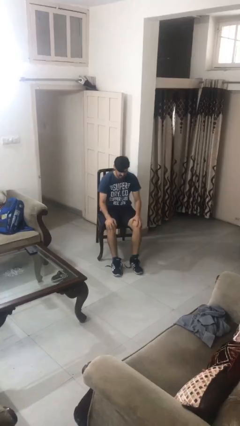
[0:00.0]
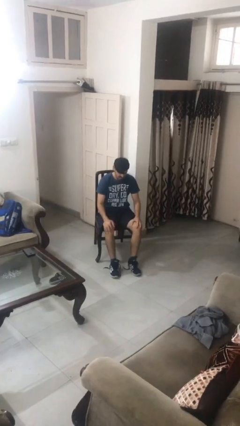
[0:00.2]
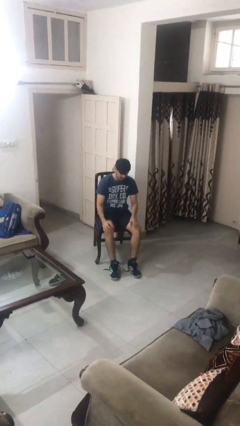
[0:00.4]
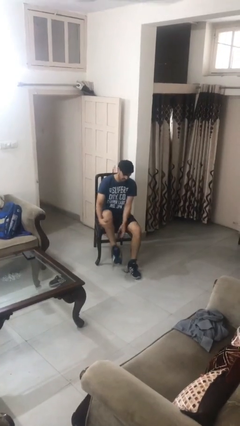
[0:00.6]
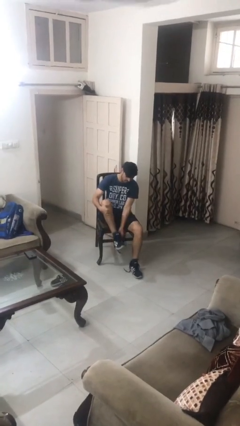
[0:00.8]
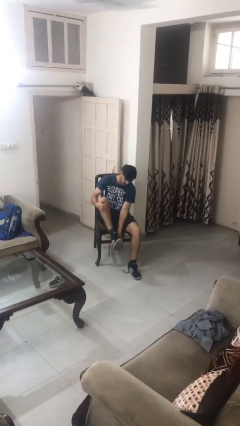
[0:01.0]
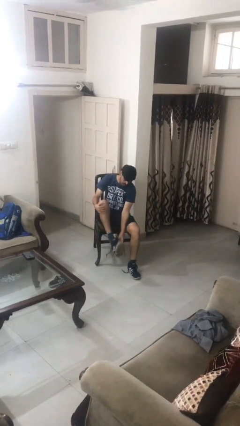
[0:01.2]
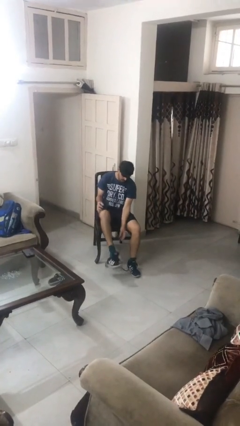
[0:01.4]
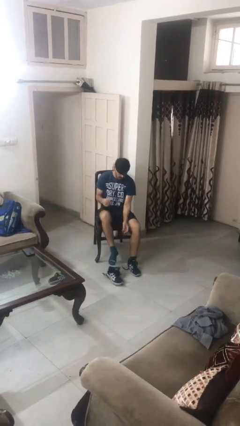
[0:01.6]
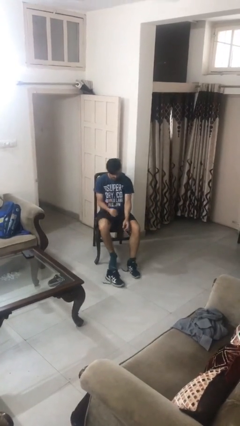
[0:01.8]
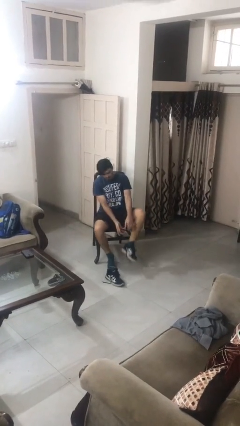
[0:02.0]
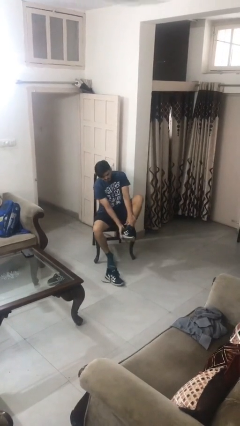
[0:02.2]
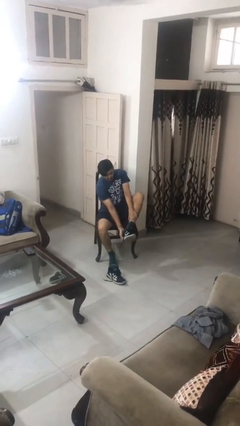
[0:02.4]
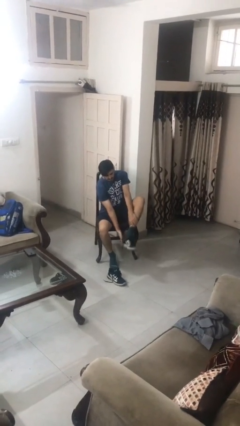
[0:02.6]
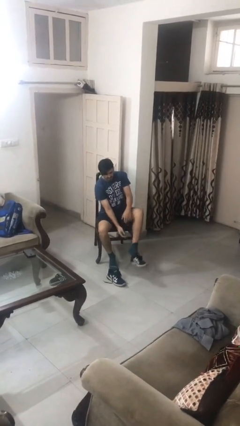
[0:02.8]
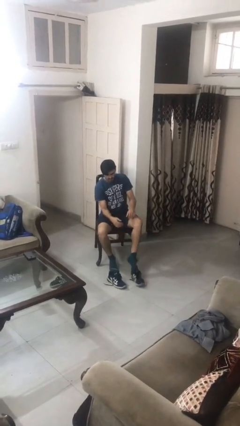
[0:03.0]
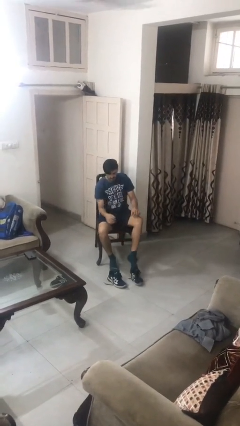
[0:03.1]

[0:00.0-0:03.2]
person takes off shoes

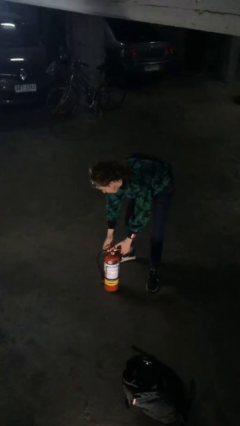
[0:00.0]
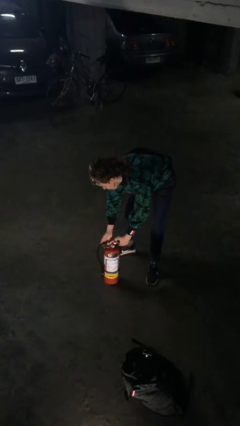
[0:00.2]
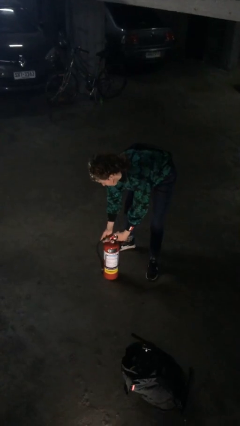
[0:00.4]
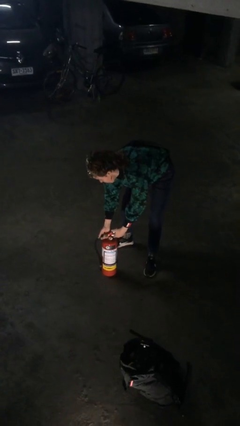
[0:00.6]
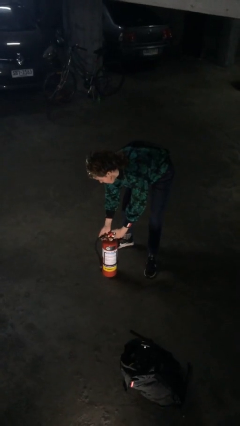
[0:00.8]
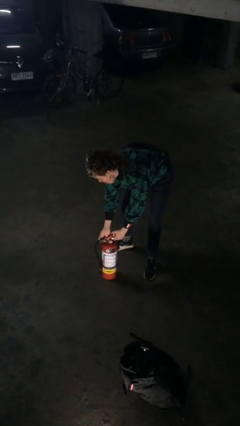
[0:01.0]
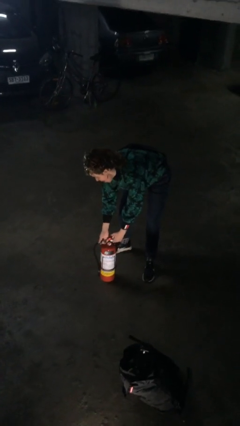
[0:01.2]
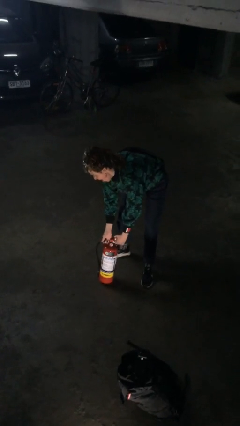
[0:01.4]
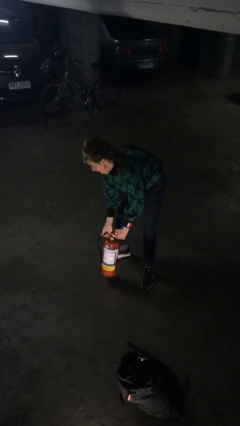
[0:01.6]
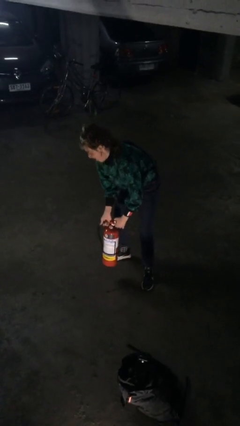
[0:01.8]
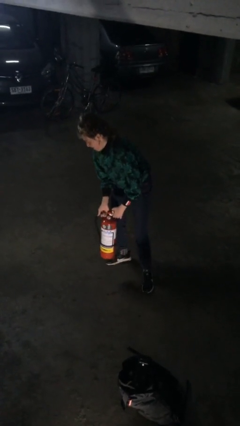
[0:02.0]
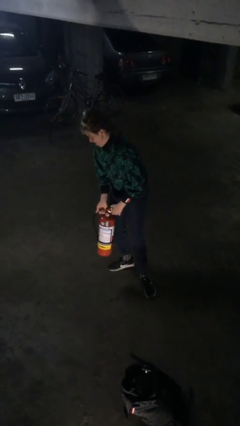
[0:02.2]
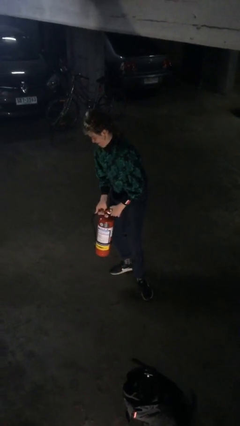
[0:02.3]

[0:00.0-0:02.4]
person picks up object from floor

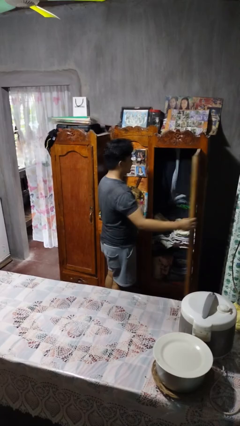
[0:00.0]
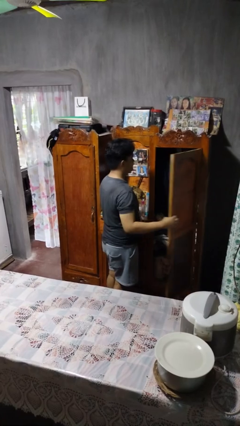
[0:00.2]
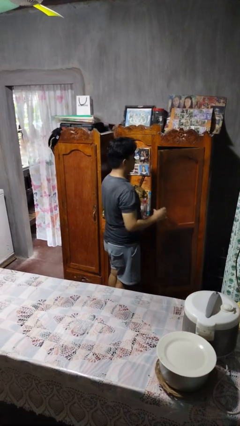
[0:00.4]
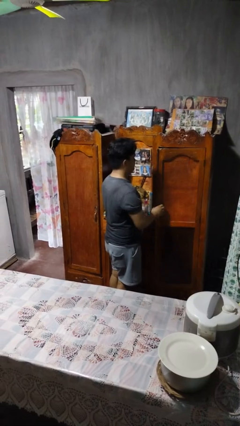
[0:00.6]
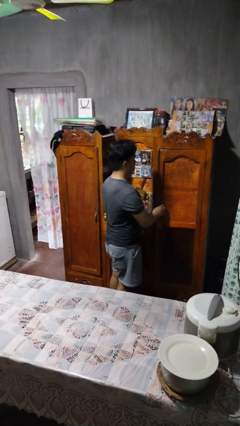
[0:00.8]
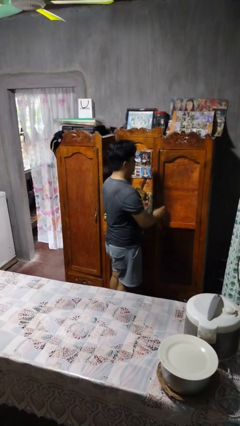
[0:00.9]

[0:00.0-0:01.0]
person closes closet door

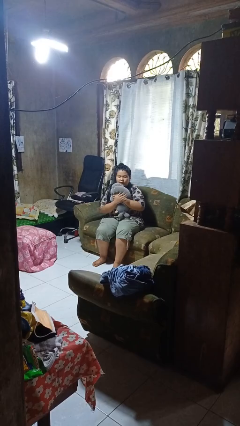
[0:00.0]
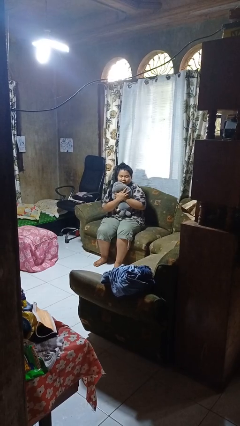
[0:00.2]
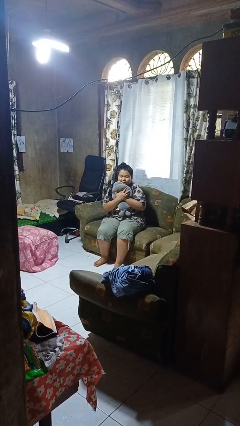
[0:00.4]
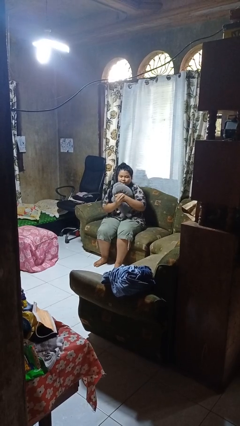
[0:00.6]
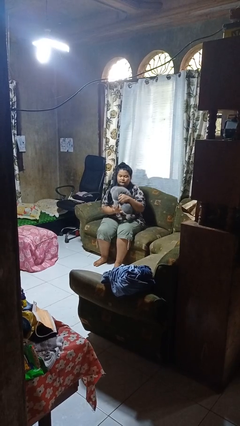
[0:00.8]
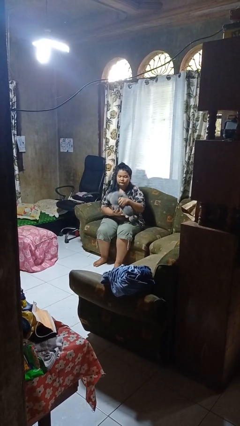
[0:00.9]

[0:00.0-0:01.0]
person hugs stuffed animal

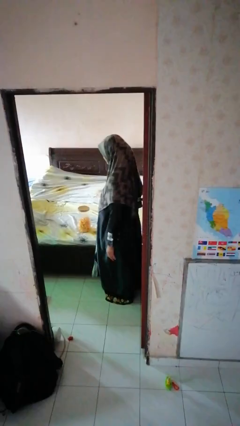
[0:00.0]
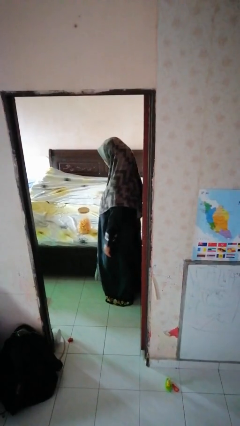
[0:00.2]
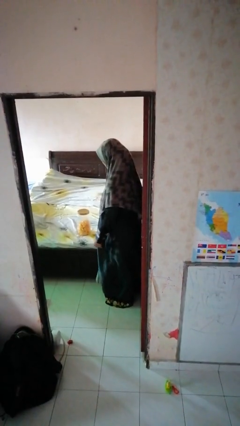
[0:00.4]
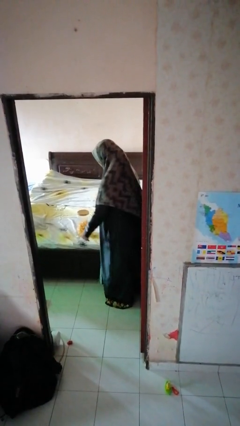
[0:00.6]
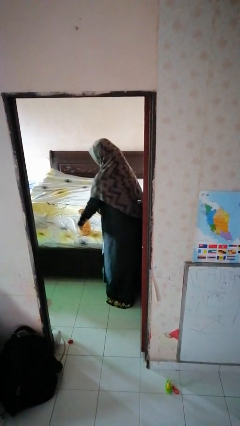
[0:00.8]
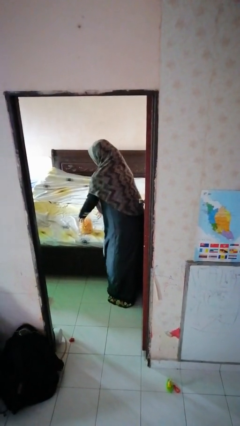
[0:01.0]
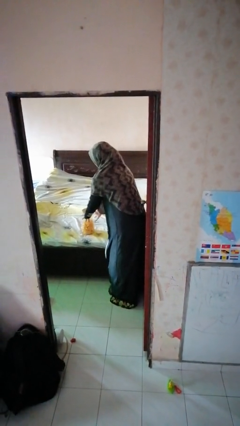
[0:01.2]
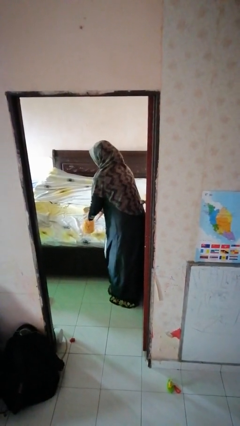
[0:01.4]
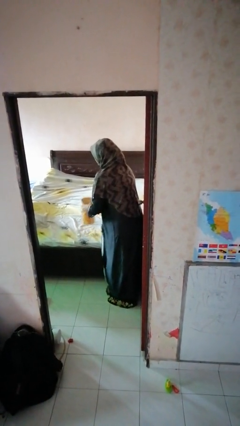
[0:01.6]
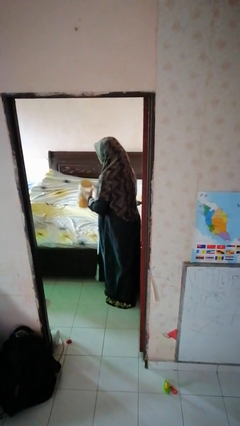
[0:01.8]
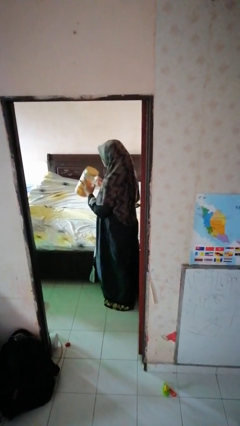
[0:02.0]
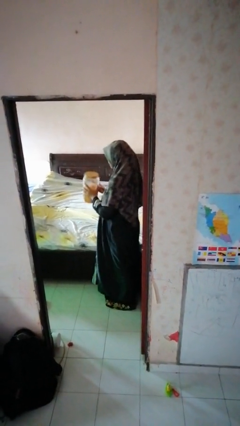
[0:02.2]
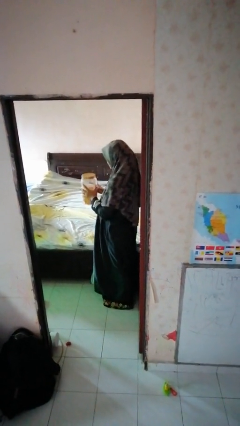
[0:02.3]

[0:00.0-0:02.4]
person picks up object from bed

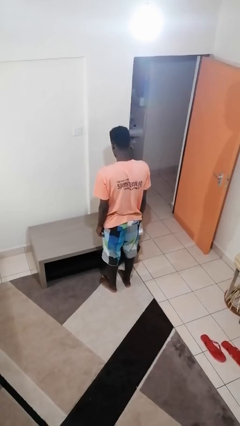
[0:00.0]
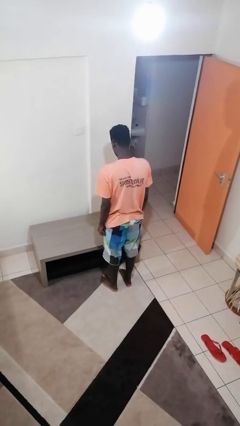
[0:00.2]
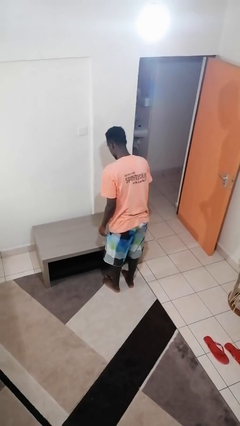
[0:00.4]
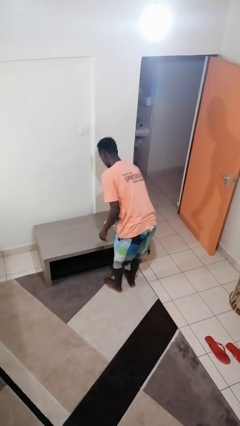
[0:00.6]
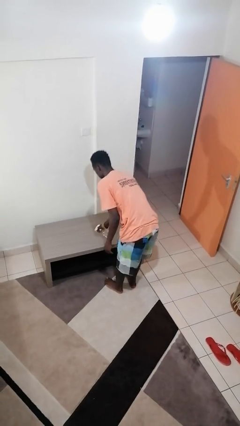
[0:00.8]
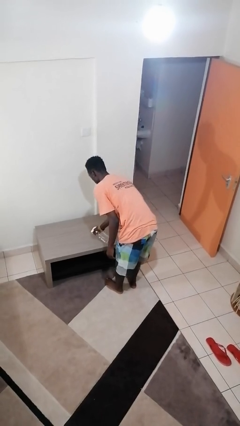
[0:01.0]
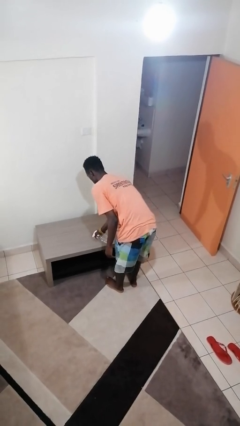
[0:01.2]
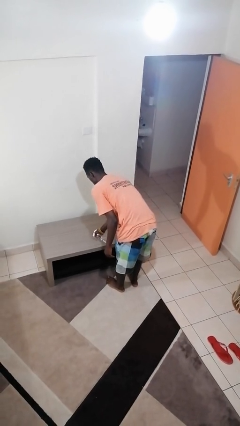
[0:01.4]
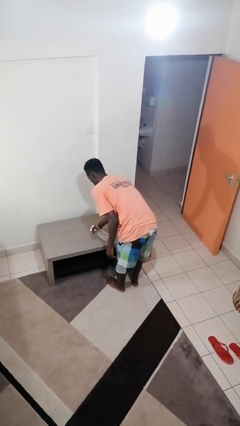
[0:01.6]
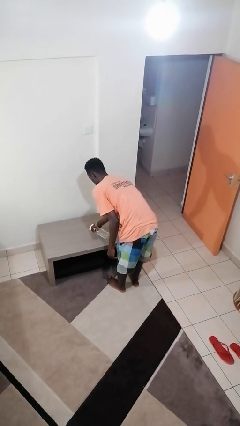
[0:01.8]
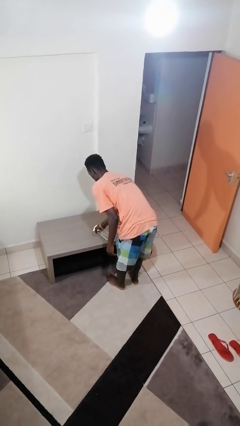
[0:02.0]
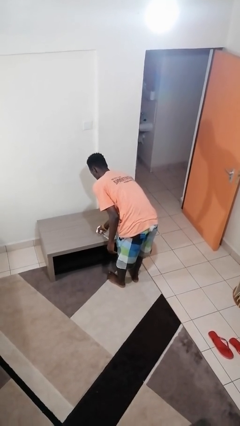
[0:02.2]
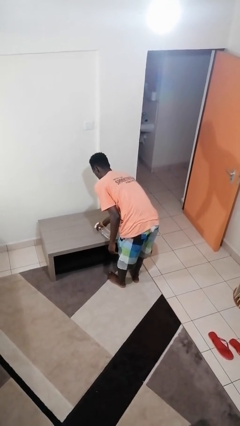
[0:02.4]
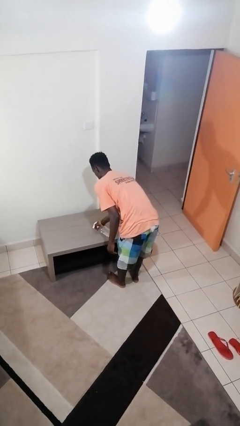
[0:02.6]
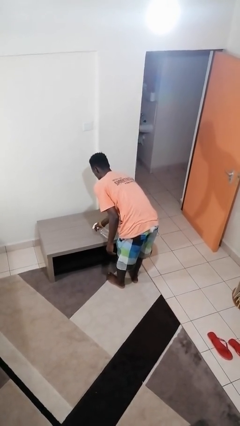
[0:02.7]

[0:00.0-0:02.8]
person sprays from bottle

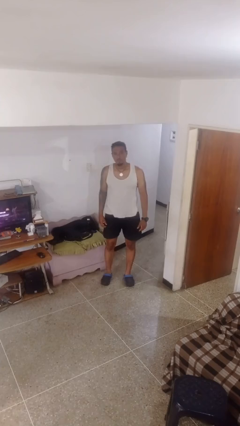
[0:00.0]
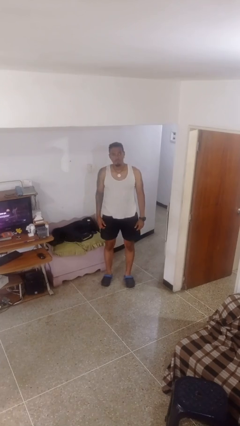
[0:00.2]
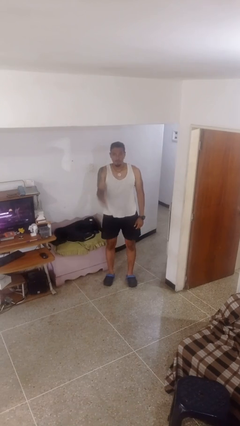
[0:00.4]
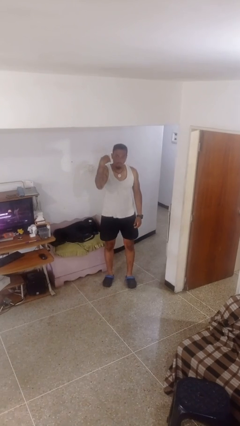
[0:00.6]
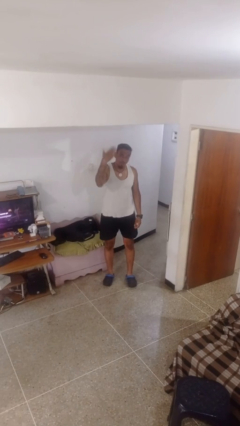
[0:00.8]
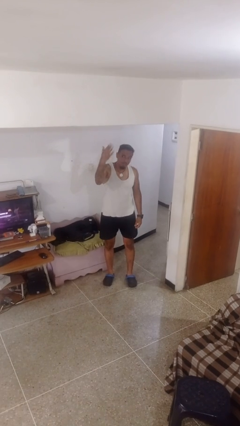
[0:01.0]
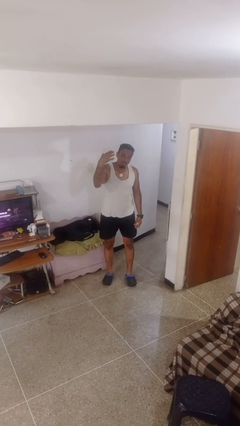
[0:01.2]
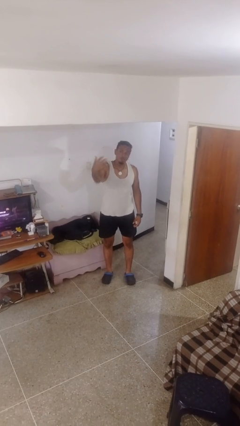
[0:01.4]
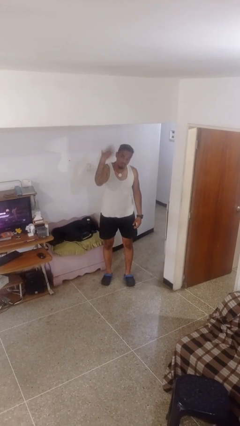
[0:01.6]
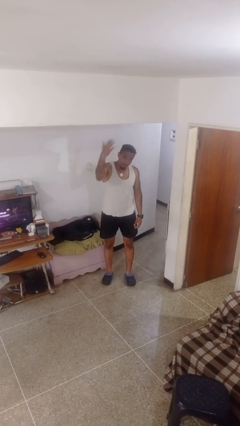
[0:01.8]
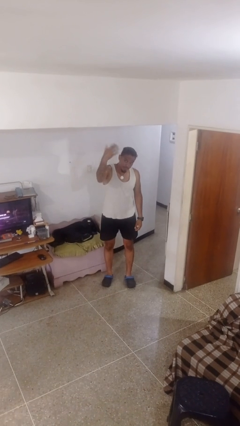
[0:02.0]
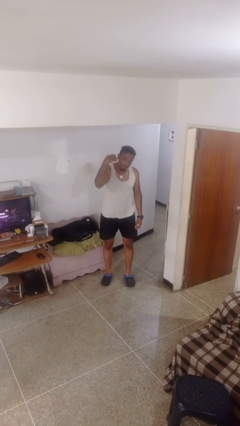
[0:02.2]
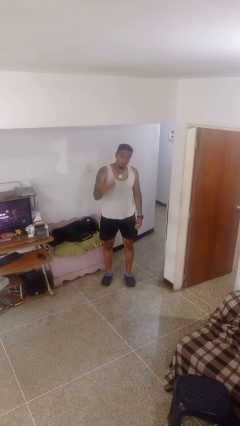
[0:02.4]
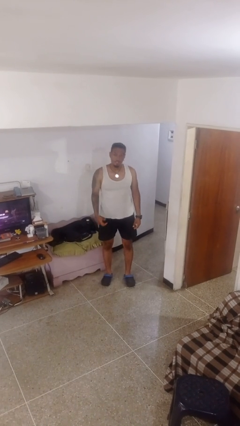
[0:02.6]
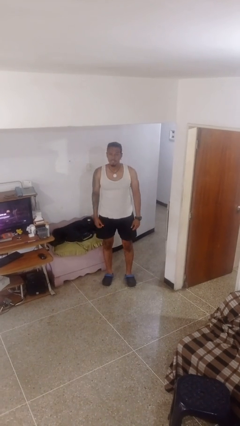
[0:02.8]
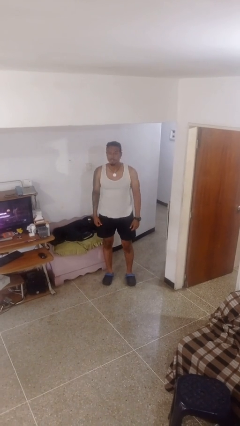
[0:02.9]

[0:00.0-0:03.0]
person gestures come here

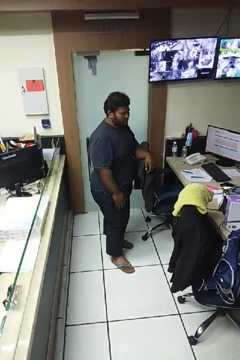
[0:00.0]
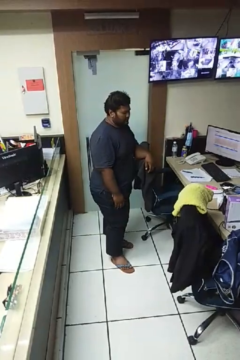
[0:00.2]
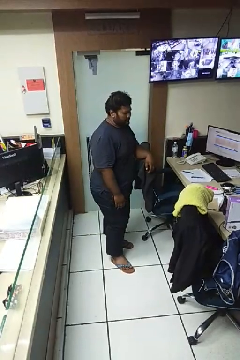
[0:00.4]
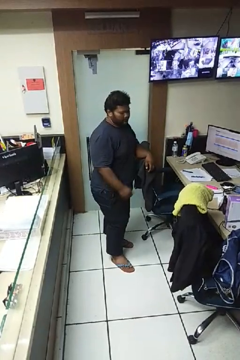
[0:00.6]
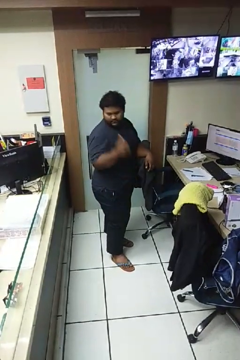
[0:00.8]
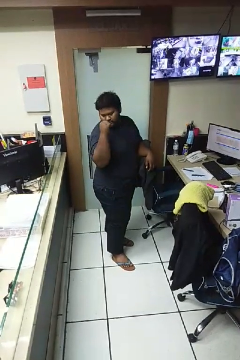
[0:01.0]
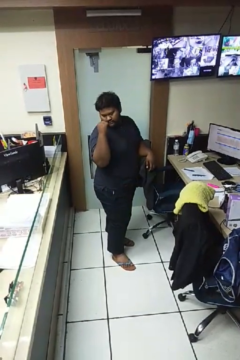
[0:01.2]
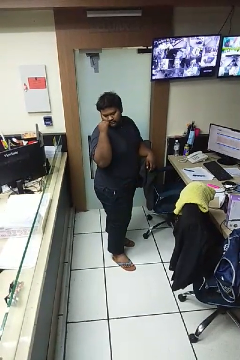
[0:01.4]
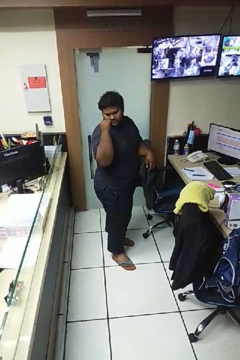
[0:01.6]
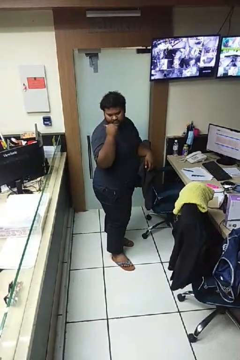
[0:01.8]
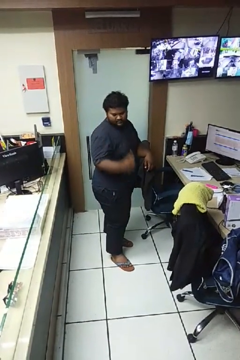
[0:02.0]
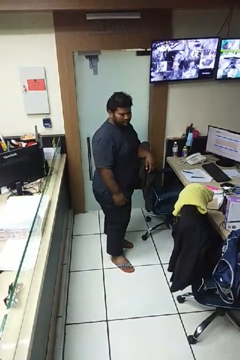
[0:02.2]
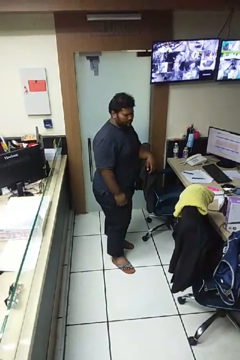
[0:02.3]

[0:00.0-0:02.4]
person gestures behind me
